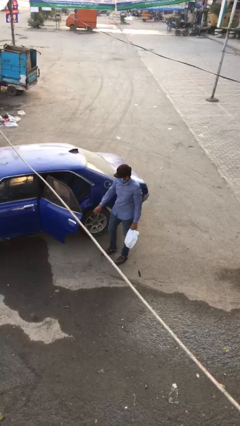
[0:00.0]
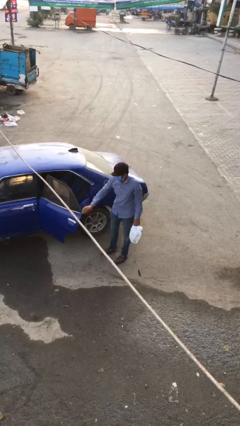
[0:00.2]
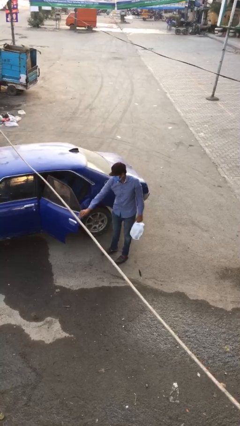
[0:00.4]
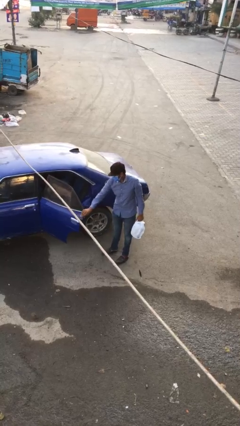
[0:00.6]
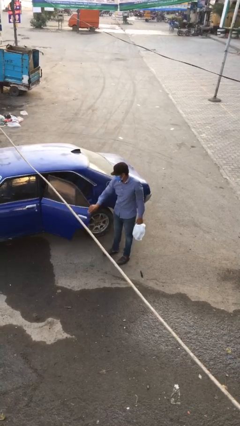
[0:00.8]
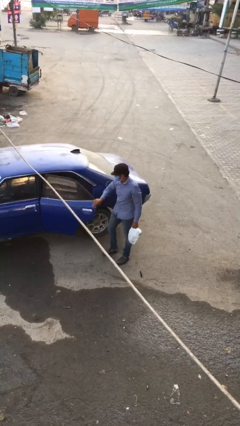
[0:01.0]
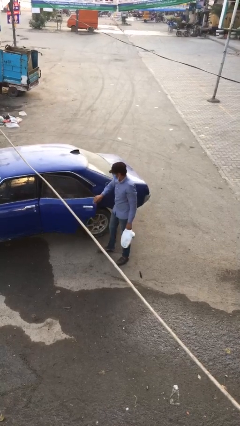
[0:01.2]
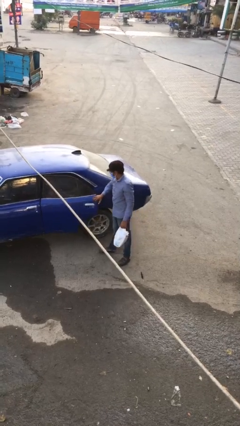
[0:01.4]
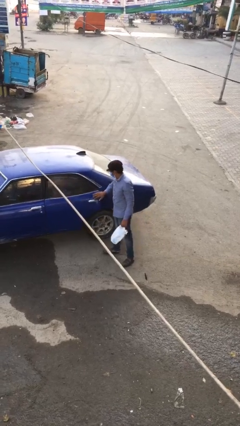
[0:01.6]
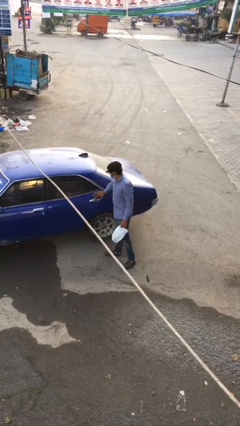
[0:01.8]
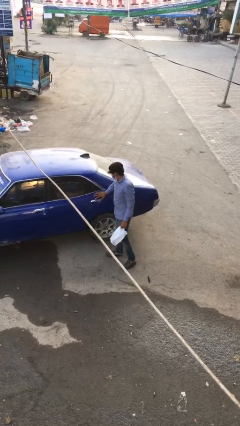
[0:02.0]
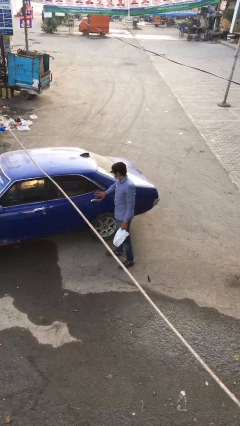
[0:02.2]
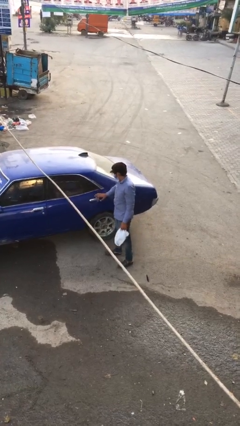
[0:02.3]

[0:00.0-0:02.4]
person closes car door

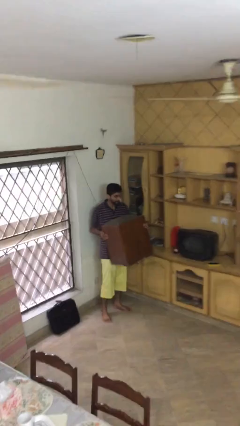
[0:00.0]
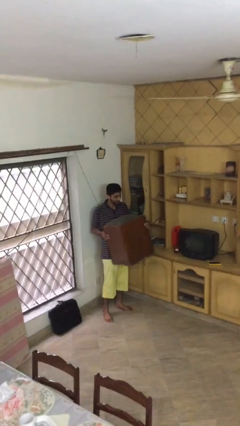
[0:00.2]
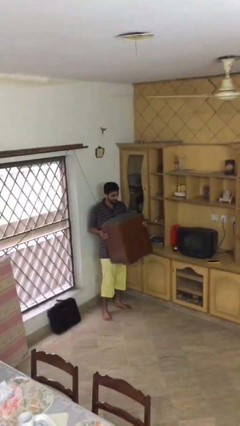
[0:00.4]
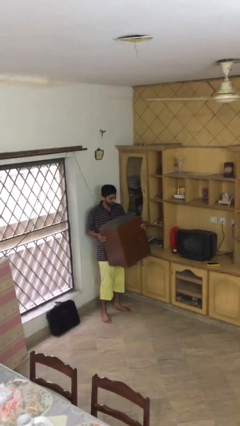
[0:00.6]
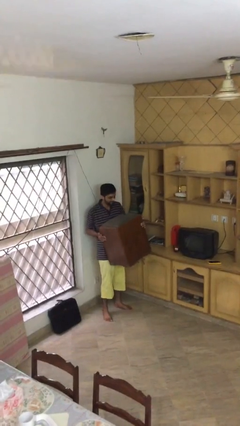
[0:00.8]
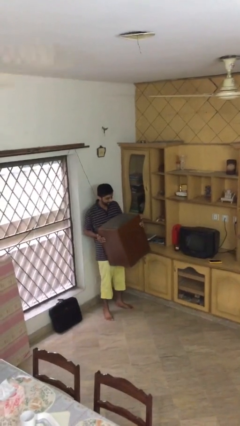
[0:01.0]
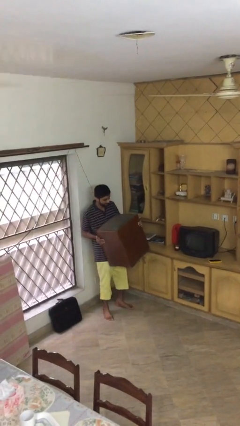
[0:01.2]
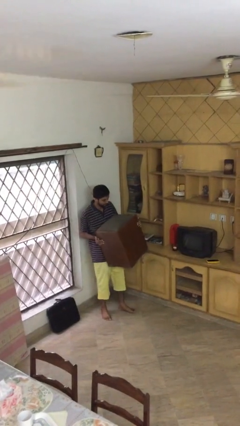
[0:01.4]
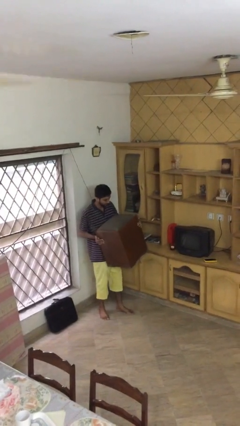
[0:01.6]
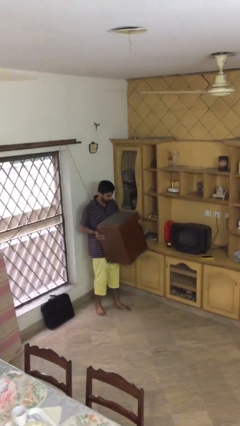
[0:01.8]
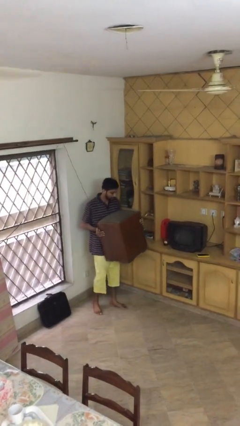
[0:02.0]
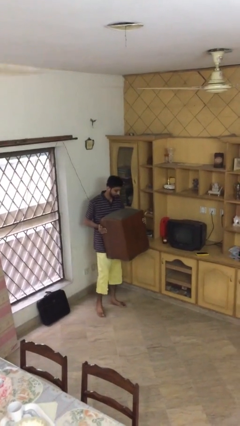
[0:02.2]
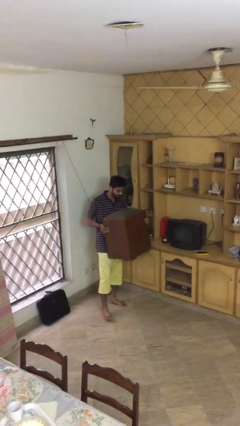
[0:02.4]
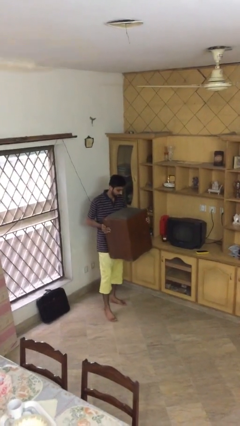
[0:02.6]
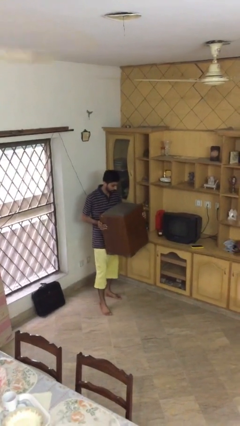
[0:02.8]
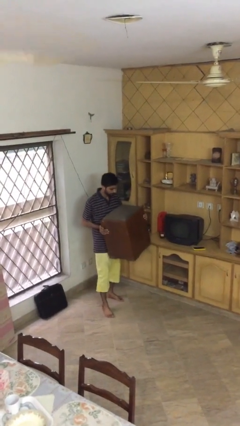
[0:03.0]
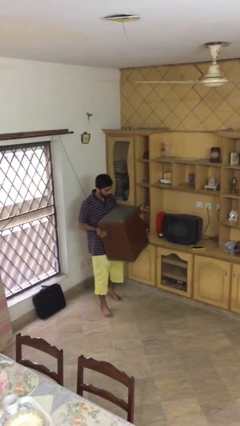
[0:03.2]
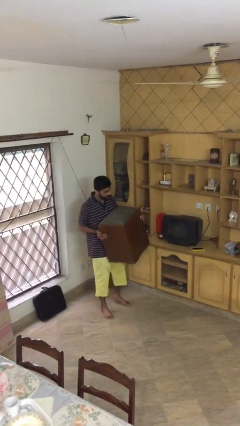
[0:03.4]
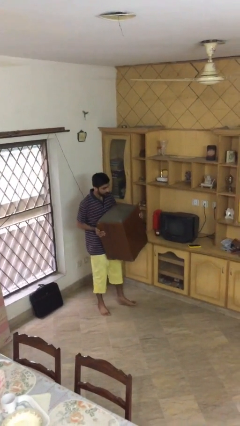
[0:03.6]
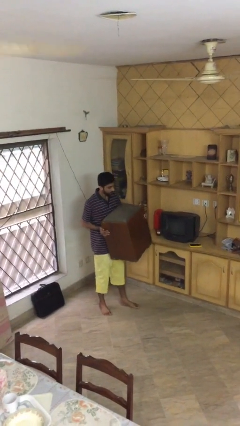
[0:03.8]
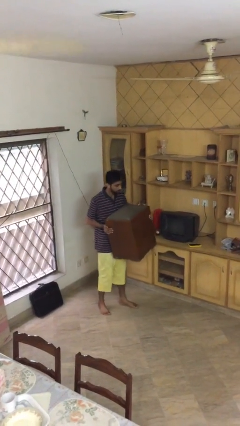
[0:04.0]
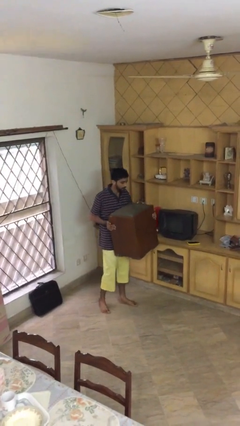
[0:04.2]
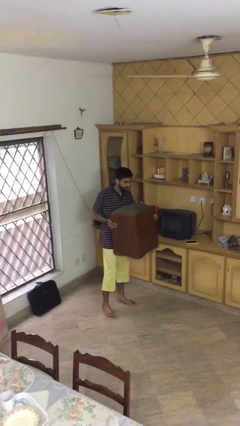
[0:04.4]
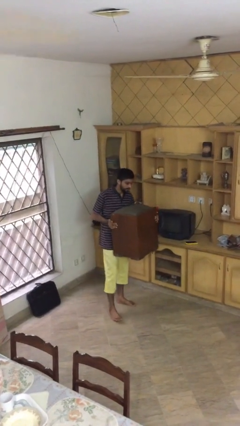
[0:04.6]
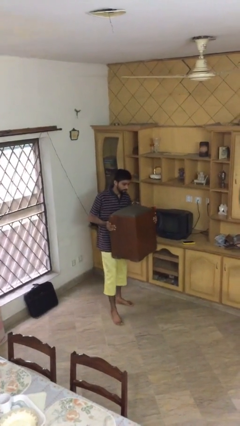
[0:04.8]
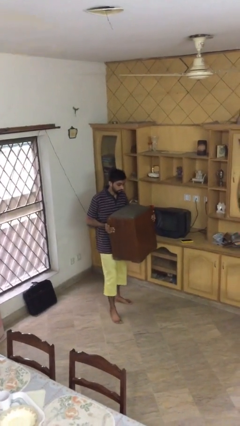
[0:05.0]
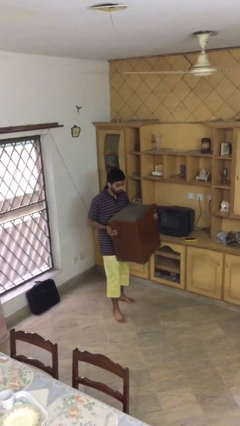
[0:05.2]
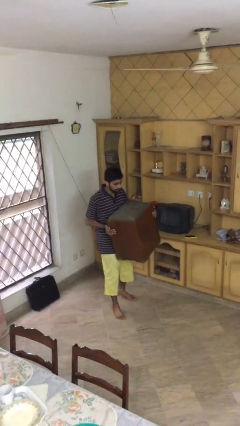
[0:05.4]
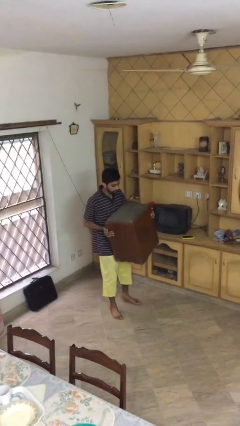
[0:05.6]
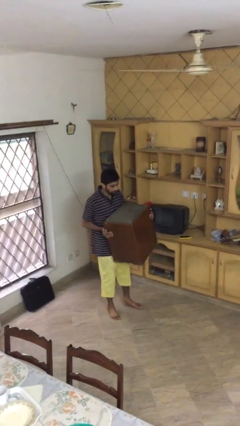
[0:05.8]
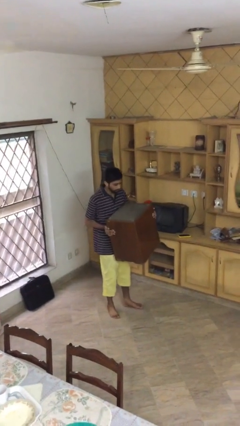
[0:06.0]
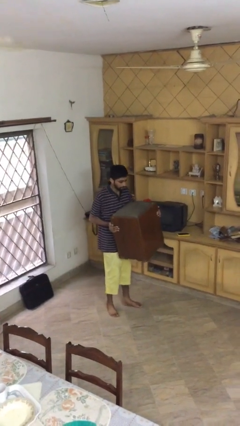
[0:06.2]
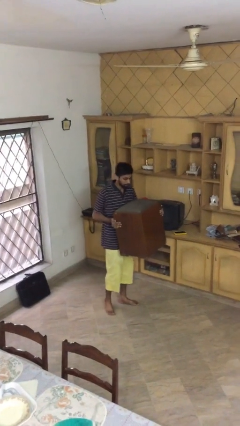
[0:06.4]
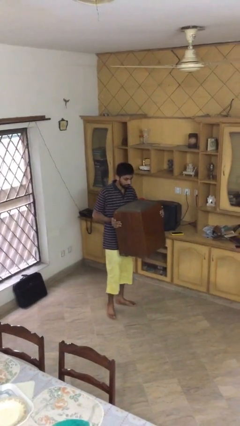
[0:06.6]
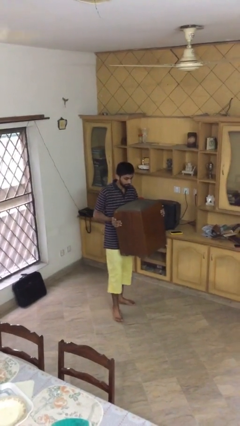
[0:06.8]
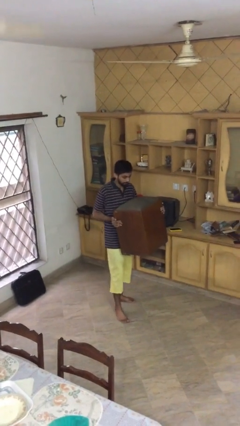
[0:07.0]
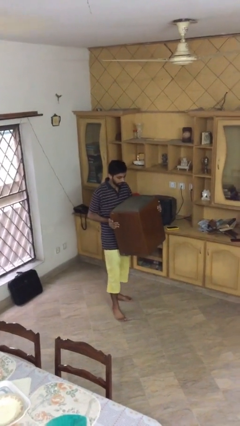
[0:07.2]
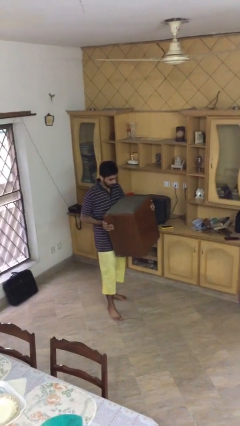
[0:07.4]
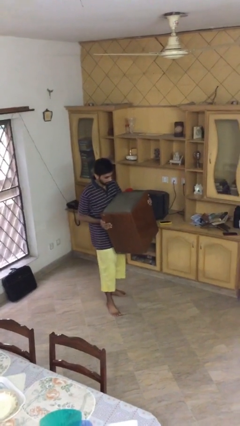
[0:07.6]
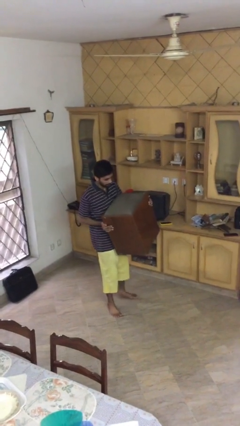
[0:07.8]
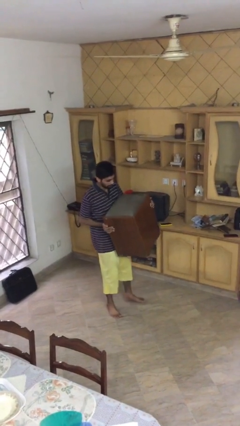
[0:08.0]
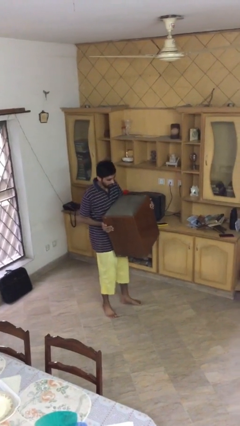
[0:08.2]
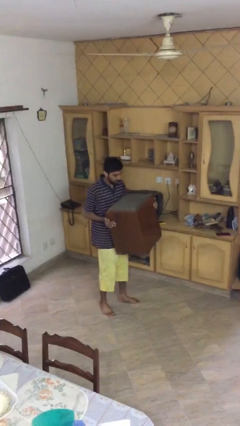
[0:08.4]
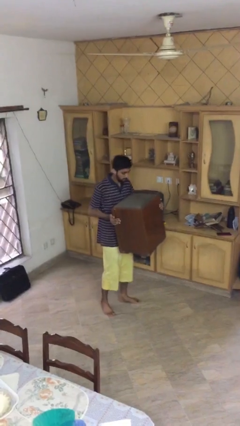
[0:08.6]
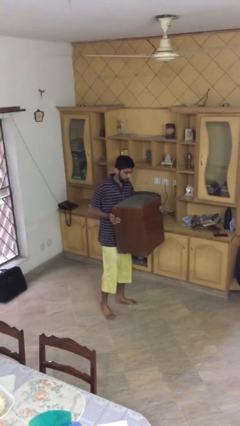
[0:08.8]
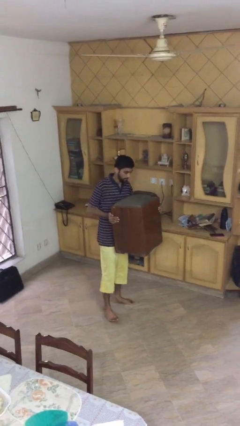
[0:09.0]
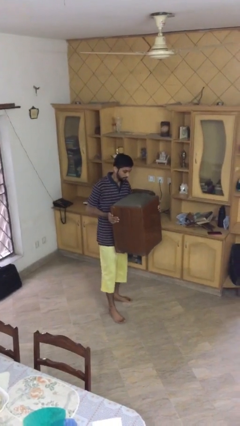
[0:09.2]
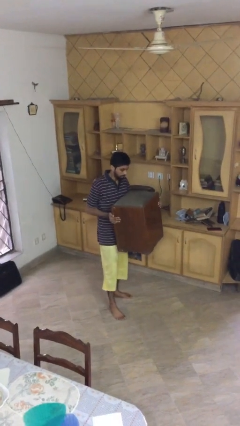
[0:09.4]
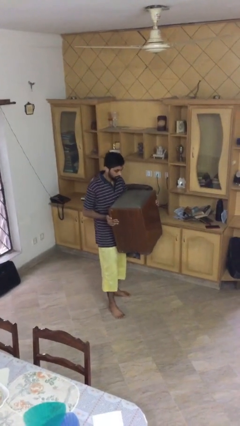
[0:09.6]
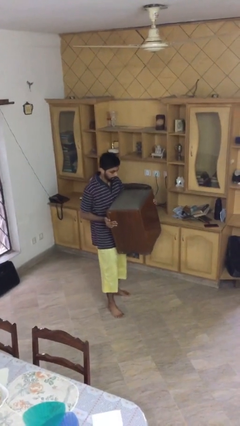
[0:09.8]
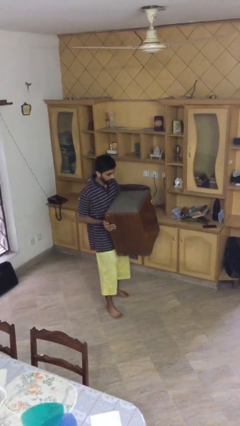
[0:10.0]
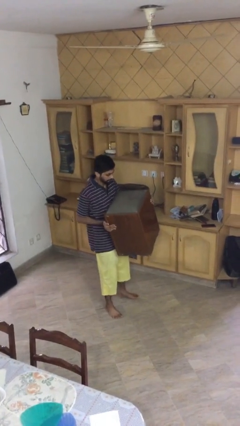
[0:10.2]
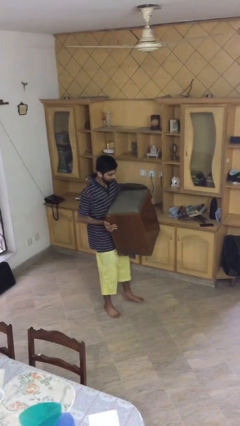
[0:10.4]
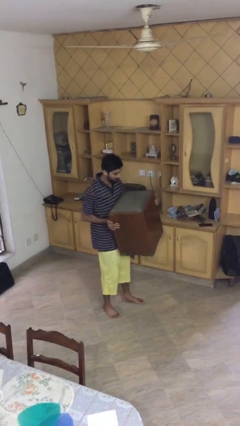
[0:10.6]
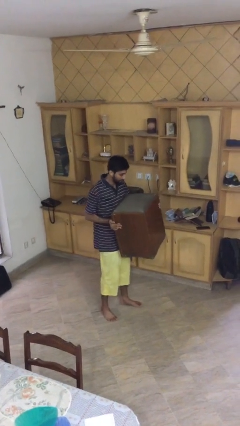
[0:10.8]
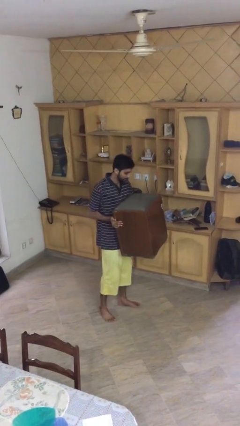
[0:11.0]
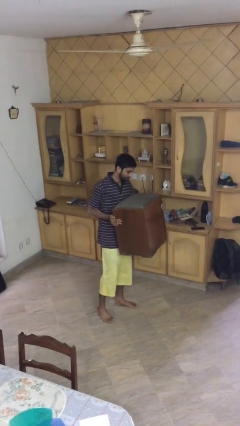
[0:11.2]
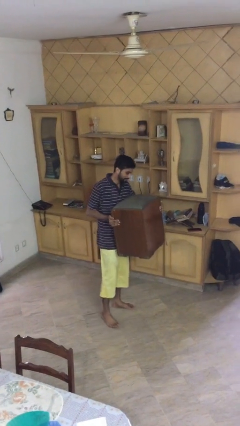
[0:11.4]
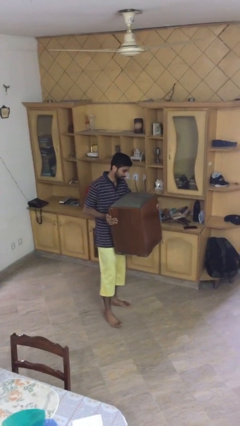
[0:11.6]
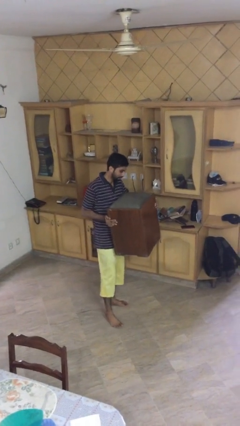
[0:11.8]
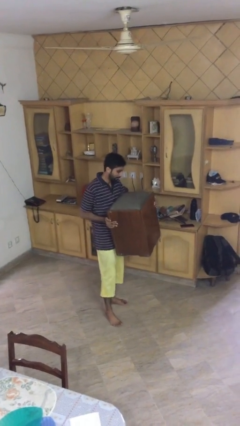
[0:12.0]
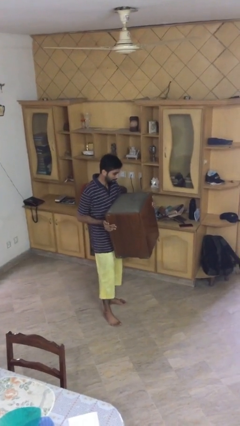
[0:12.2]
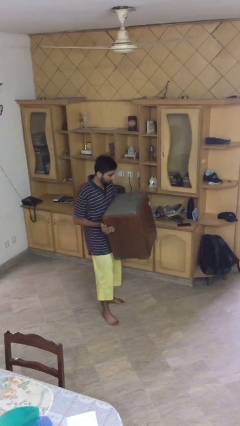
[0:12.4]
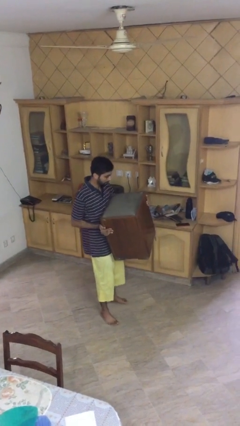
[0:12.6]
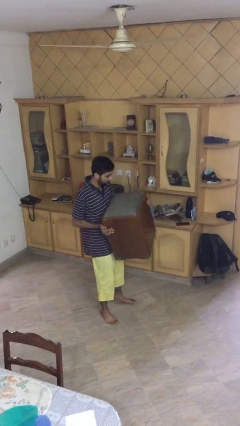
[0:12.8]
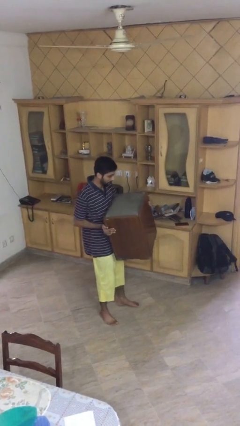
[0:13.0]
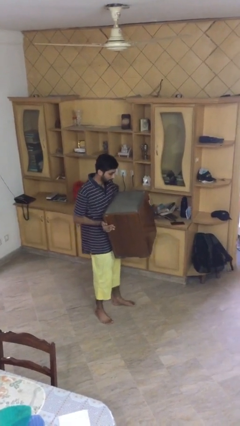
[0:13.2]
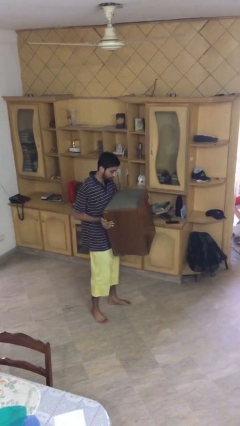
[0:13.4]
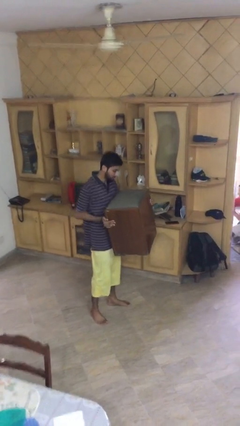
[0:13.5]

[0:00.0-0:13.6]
person carries heavy object

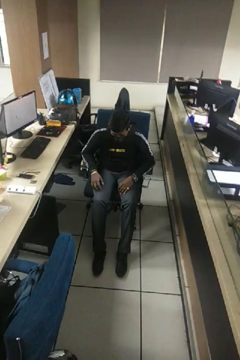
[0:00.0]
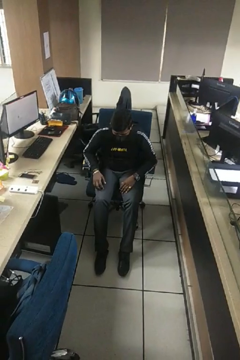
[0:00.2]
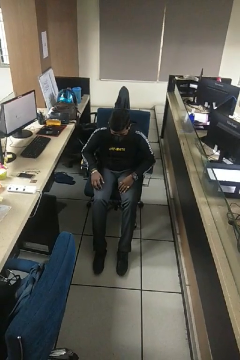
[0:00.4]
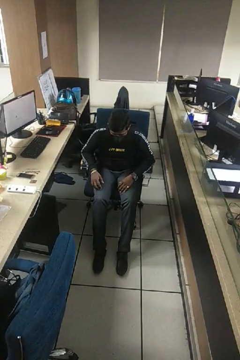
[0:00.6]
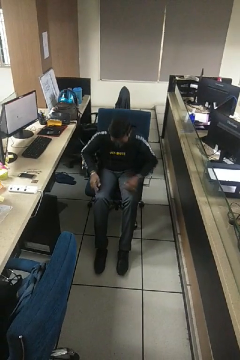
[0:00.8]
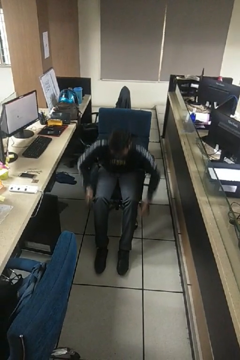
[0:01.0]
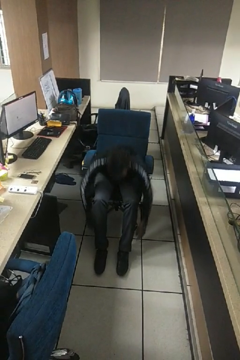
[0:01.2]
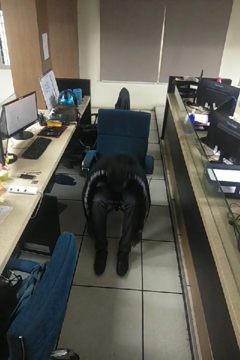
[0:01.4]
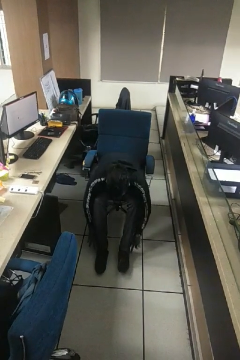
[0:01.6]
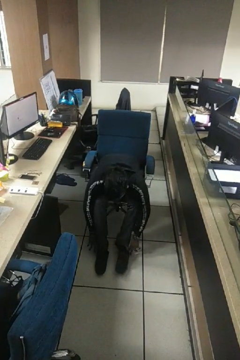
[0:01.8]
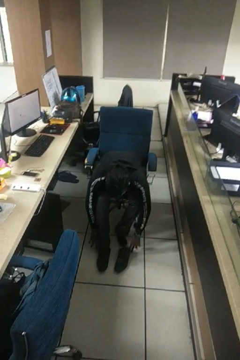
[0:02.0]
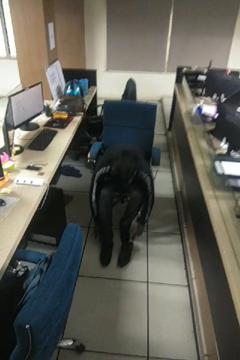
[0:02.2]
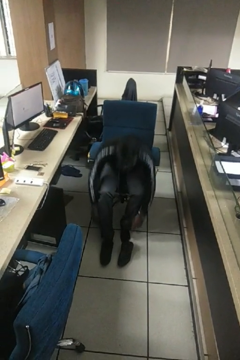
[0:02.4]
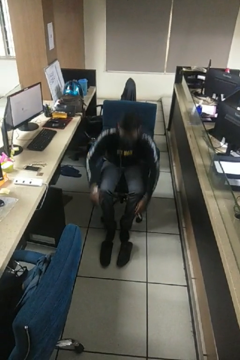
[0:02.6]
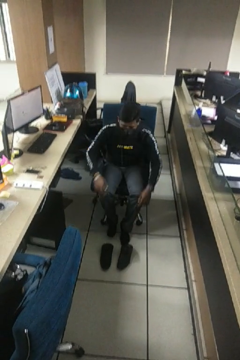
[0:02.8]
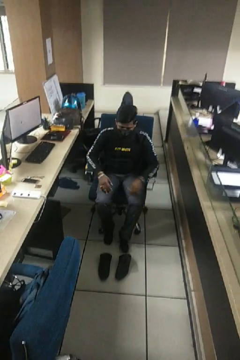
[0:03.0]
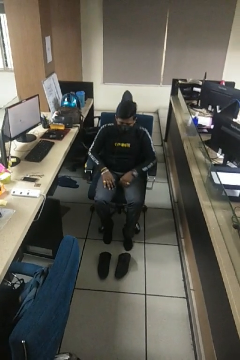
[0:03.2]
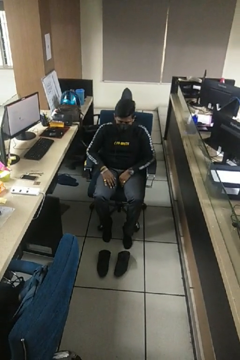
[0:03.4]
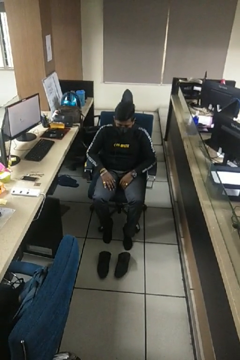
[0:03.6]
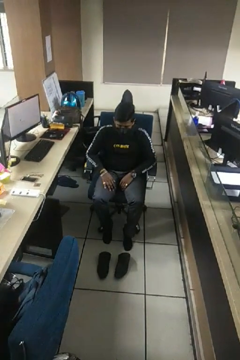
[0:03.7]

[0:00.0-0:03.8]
person takes off shoes
